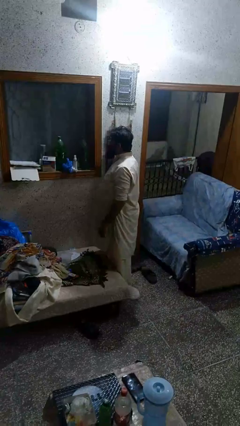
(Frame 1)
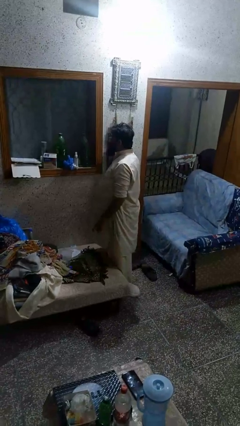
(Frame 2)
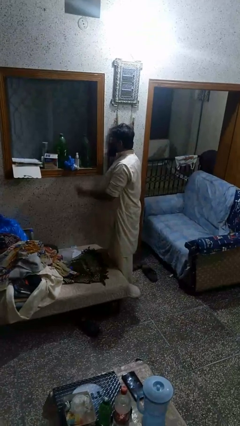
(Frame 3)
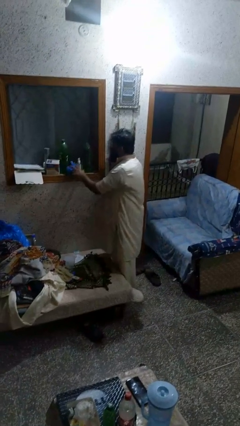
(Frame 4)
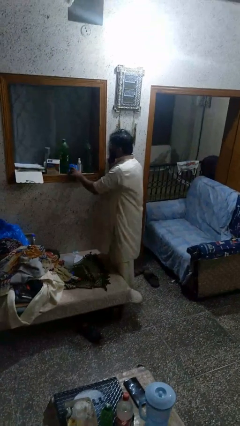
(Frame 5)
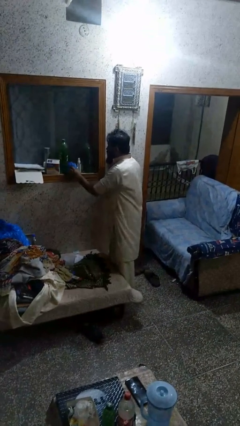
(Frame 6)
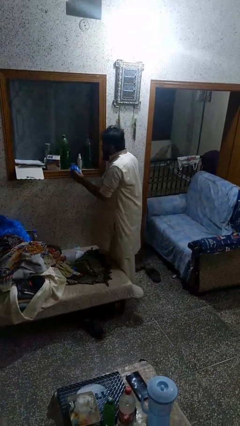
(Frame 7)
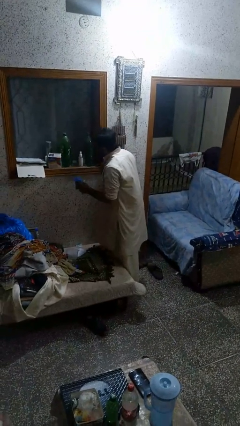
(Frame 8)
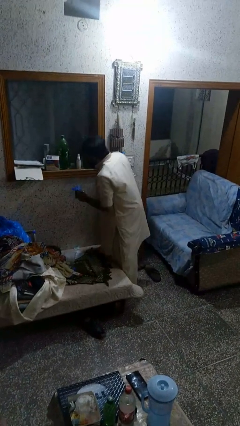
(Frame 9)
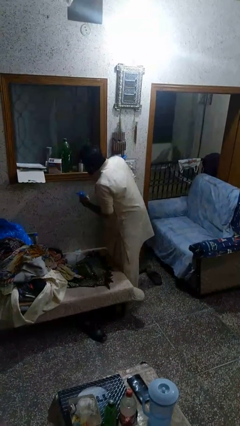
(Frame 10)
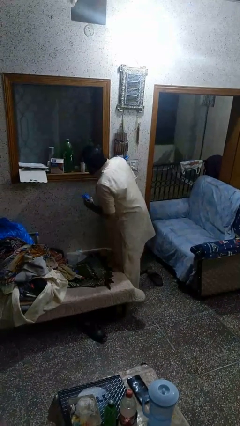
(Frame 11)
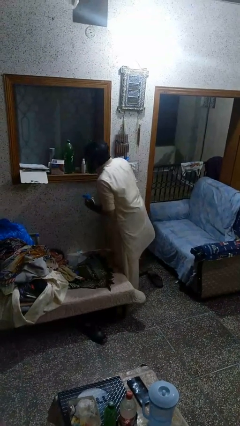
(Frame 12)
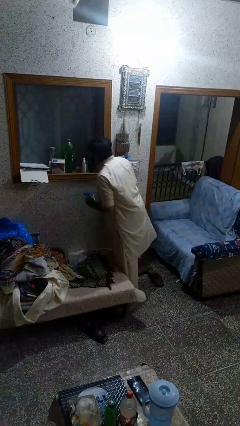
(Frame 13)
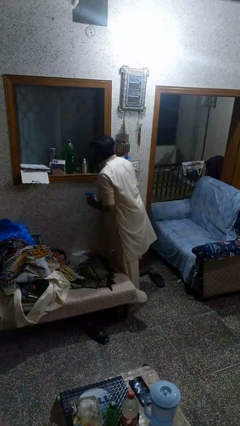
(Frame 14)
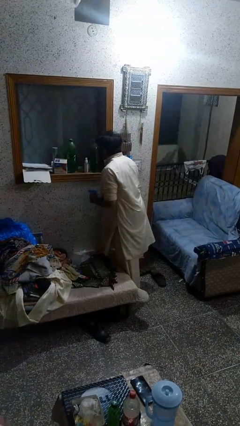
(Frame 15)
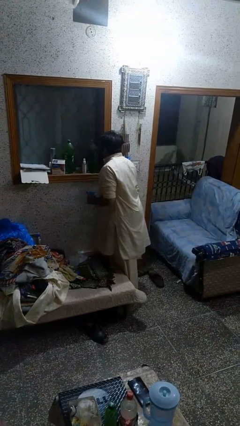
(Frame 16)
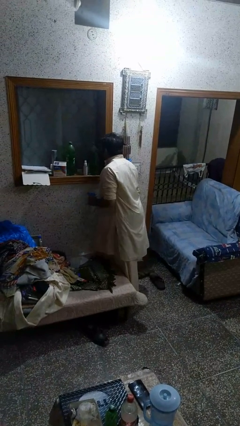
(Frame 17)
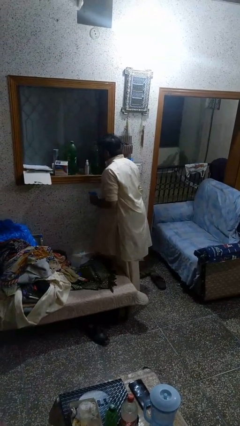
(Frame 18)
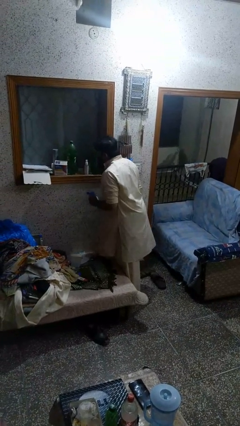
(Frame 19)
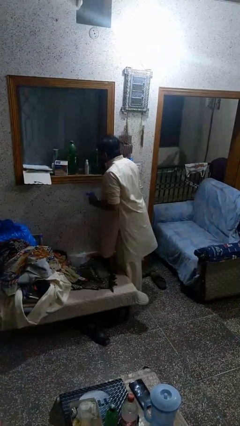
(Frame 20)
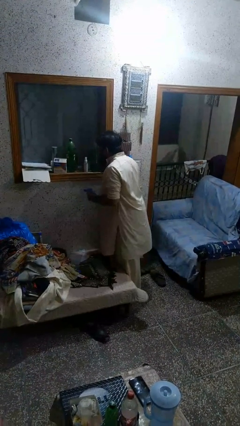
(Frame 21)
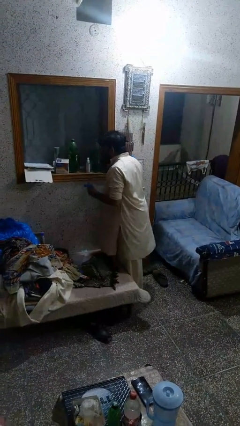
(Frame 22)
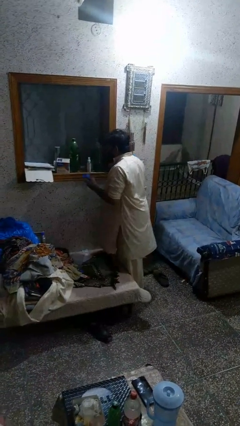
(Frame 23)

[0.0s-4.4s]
person searches in cabinet

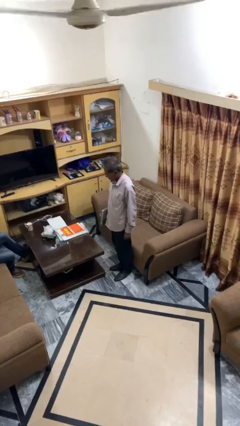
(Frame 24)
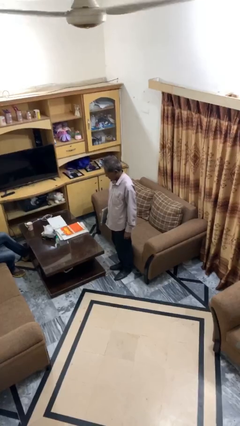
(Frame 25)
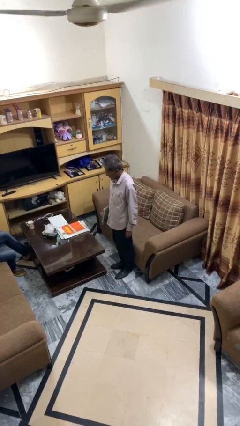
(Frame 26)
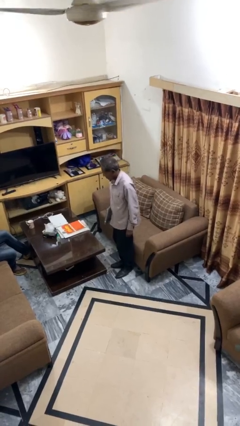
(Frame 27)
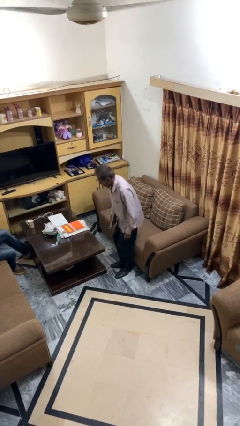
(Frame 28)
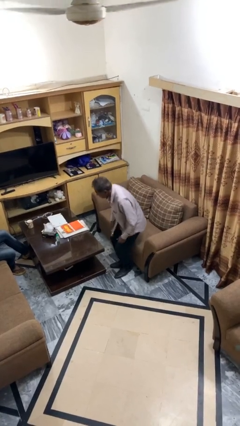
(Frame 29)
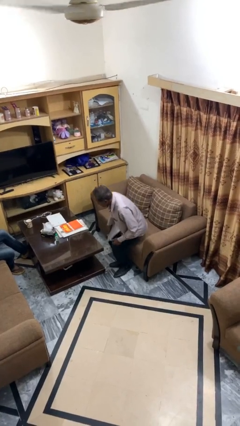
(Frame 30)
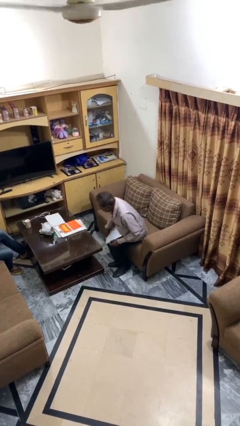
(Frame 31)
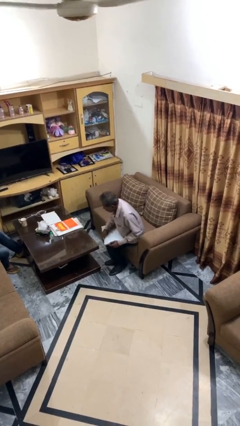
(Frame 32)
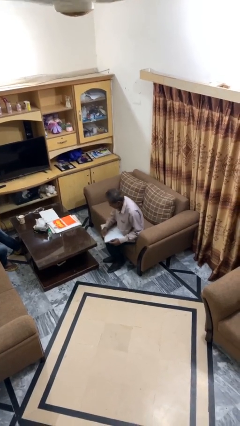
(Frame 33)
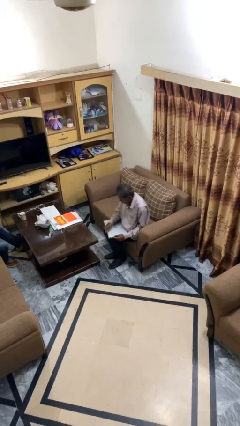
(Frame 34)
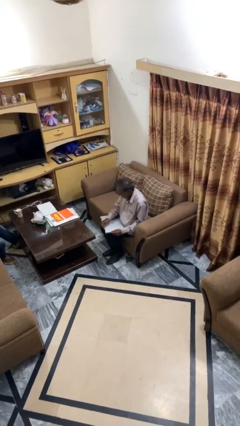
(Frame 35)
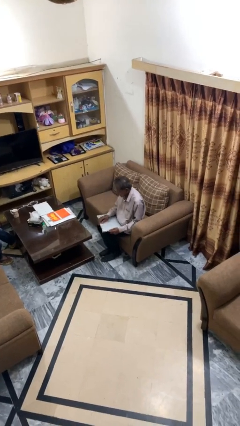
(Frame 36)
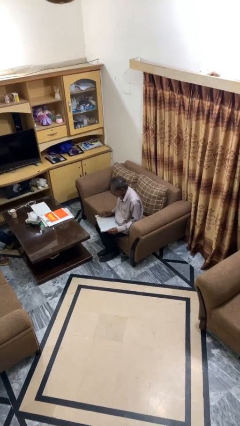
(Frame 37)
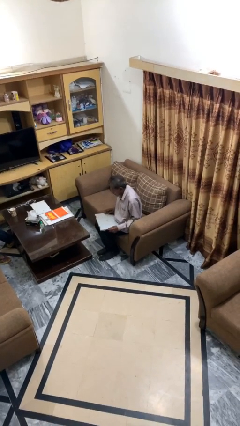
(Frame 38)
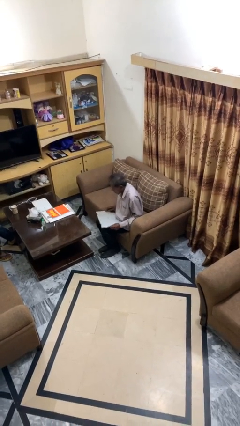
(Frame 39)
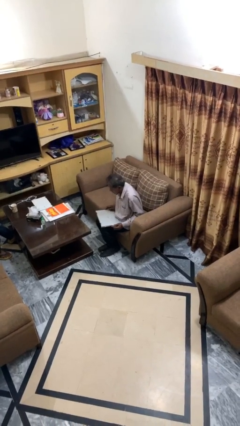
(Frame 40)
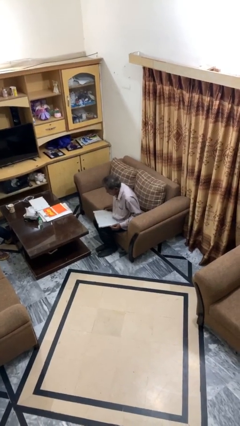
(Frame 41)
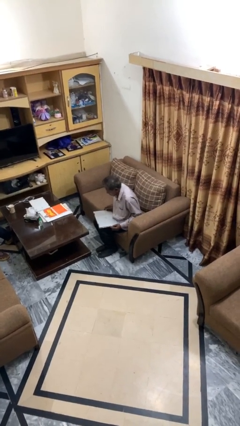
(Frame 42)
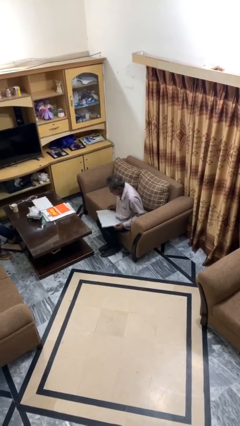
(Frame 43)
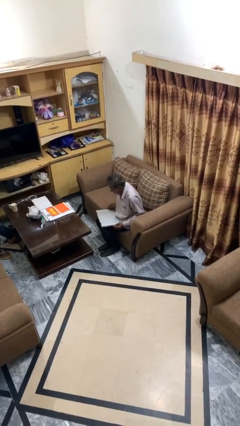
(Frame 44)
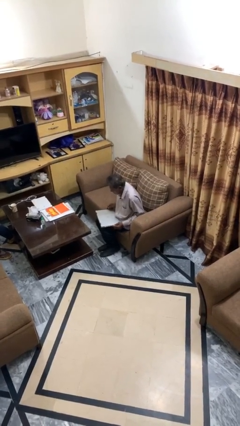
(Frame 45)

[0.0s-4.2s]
person sits down

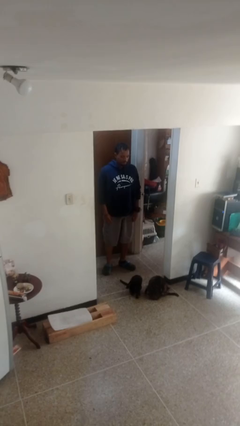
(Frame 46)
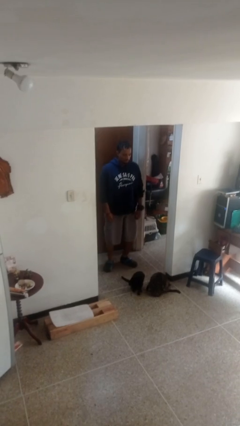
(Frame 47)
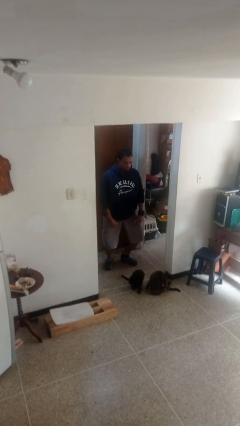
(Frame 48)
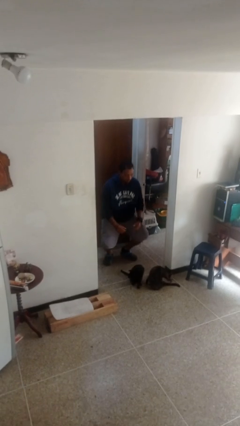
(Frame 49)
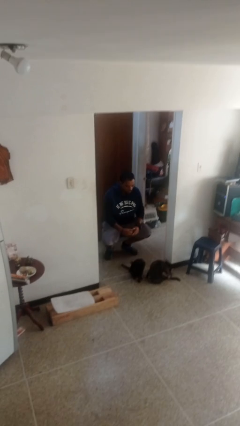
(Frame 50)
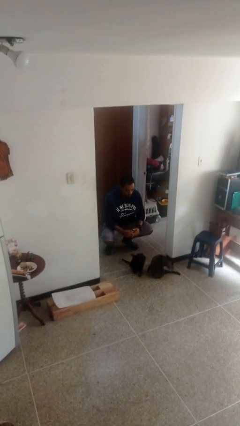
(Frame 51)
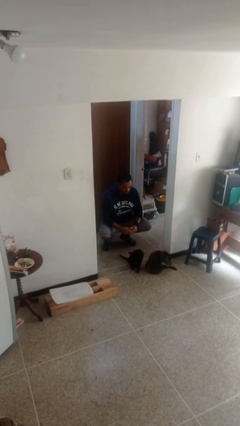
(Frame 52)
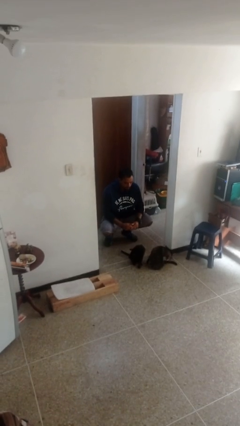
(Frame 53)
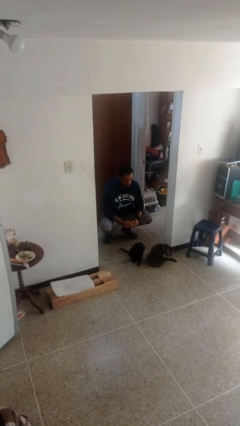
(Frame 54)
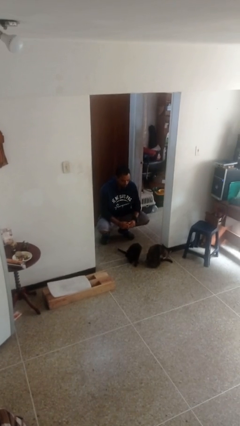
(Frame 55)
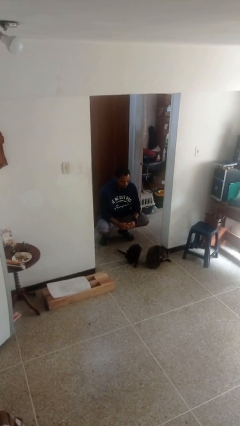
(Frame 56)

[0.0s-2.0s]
person squats

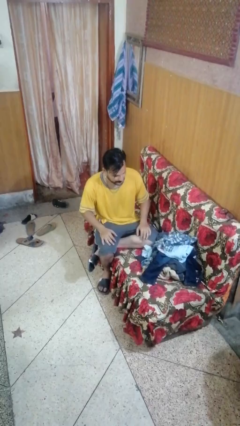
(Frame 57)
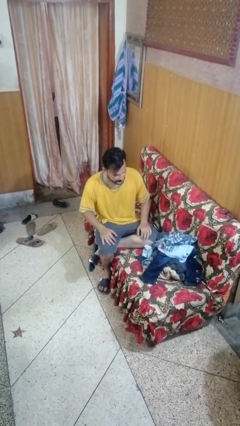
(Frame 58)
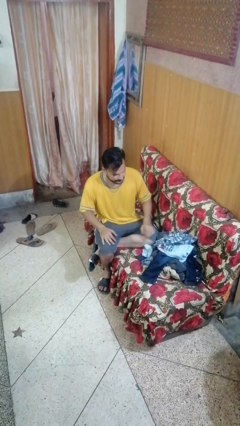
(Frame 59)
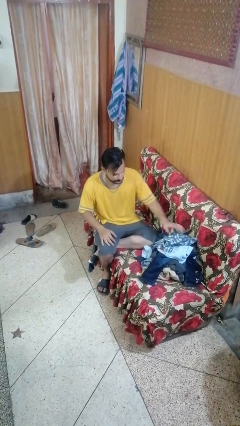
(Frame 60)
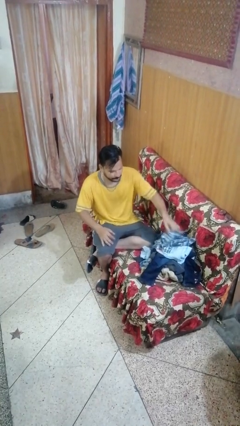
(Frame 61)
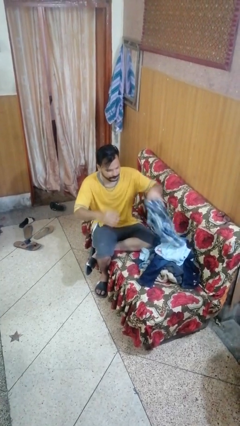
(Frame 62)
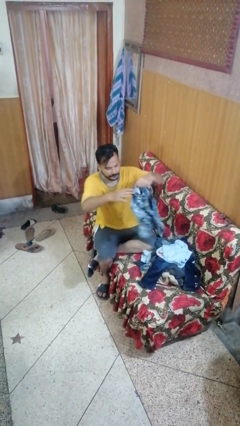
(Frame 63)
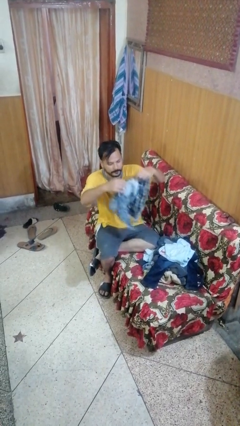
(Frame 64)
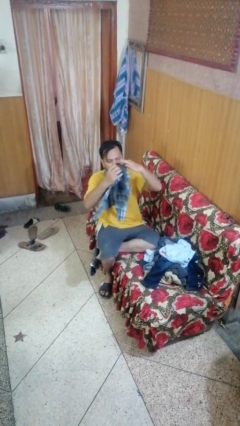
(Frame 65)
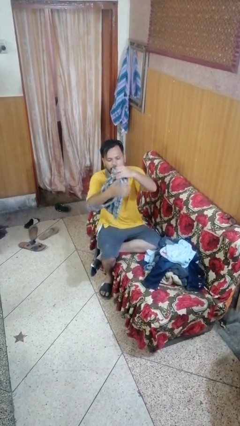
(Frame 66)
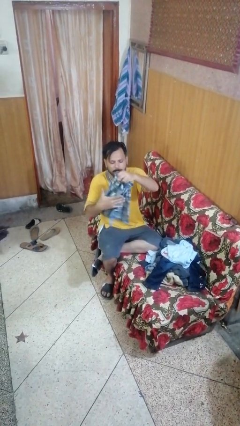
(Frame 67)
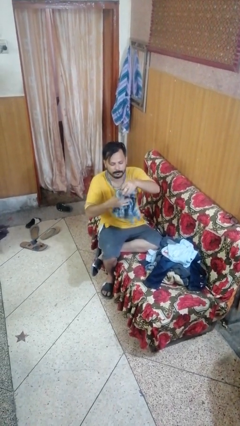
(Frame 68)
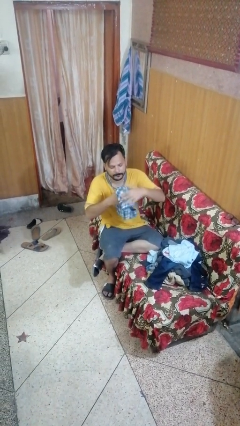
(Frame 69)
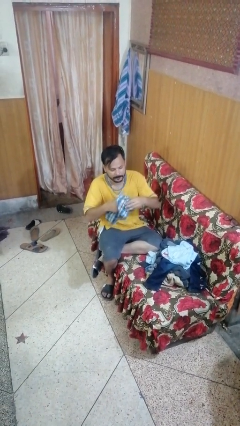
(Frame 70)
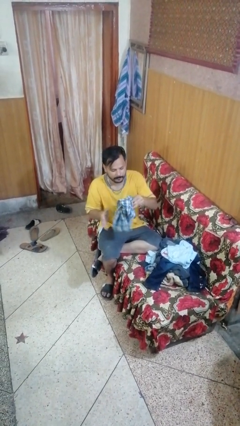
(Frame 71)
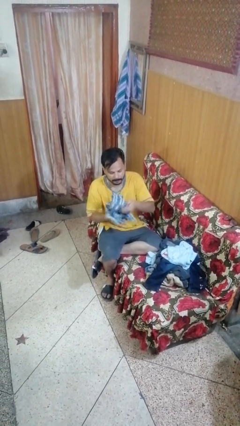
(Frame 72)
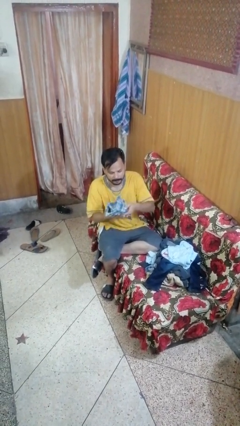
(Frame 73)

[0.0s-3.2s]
person folds shirt

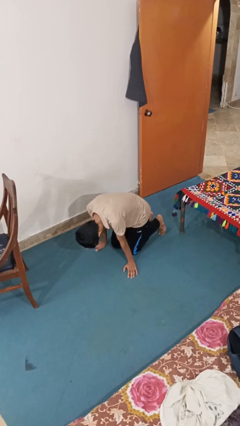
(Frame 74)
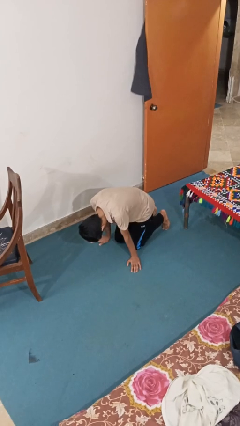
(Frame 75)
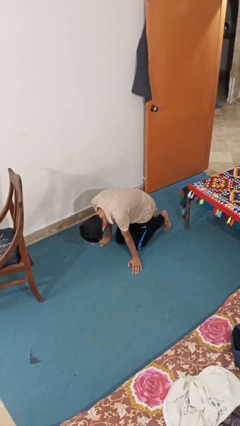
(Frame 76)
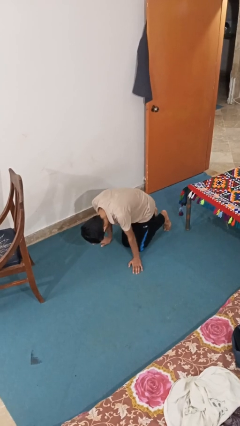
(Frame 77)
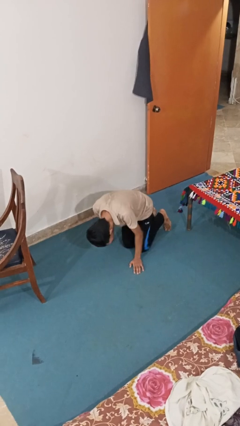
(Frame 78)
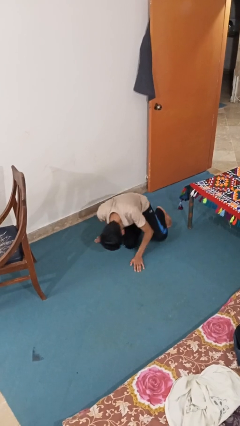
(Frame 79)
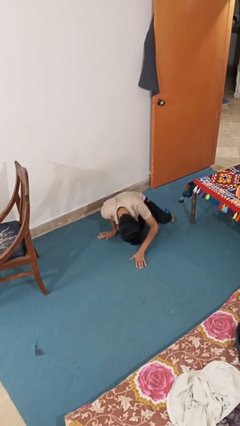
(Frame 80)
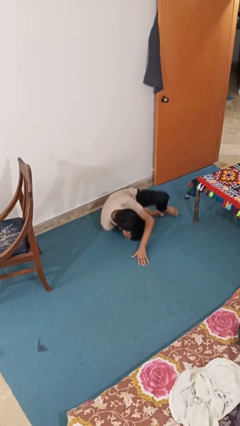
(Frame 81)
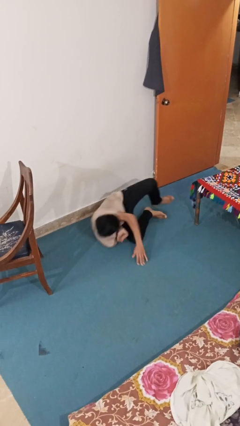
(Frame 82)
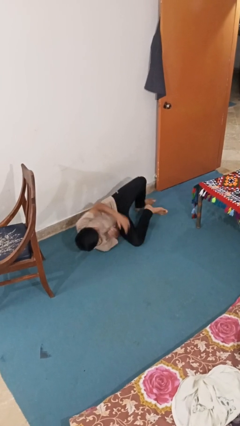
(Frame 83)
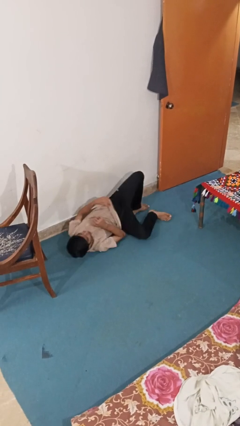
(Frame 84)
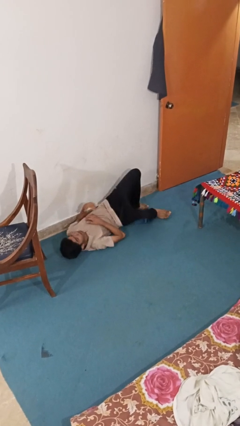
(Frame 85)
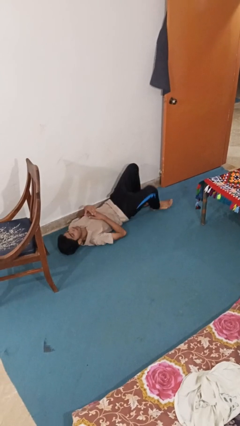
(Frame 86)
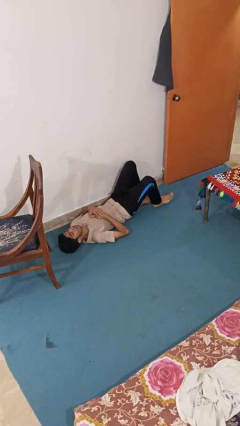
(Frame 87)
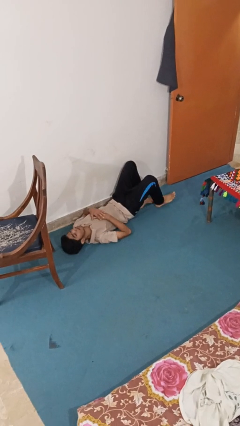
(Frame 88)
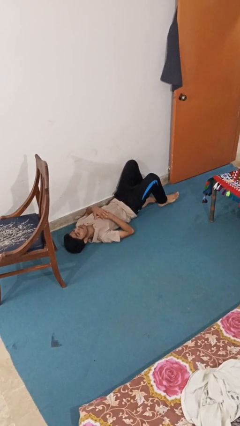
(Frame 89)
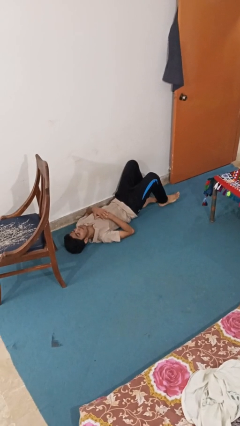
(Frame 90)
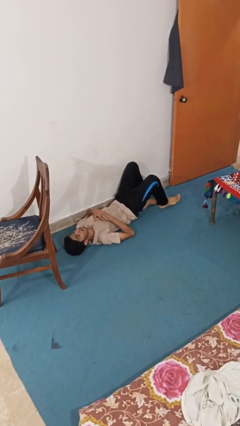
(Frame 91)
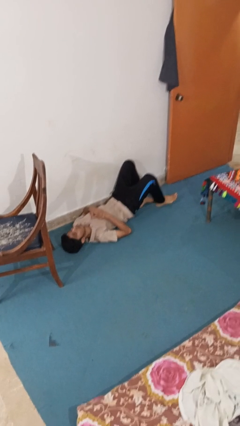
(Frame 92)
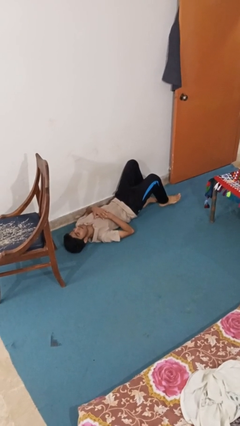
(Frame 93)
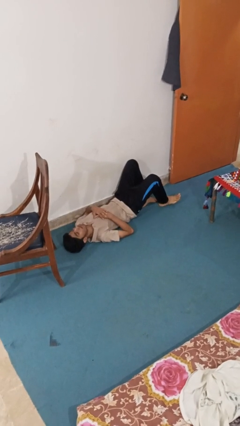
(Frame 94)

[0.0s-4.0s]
person lies down on floor
